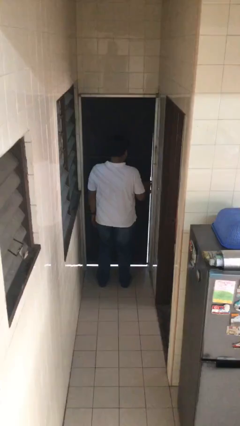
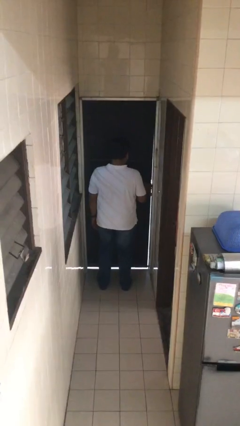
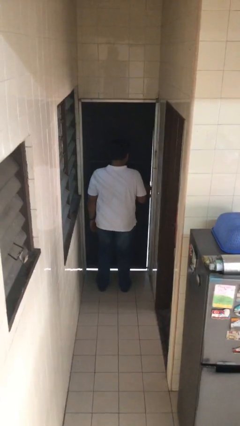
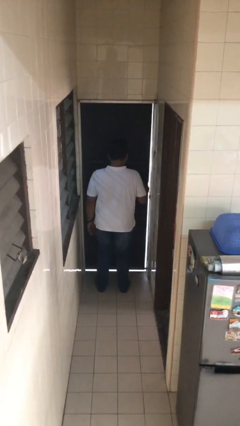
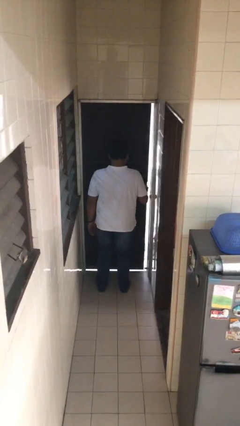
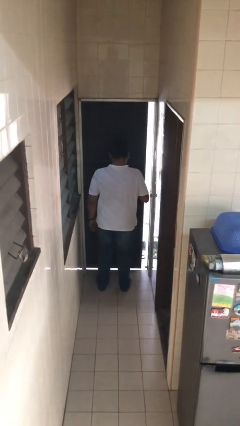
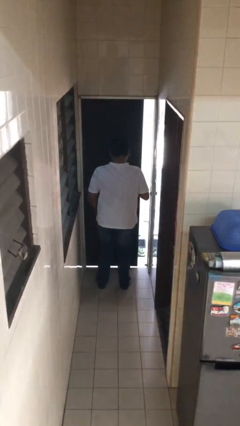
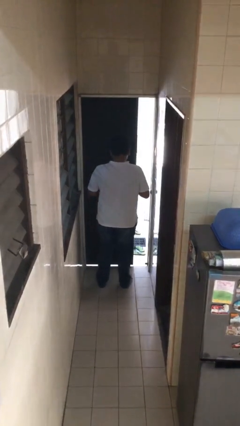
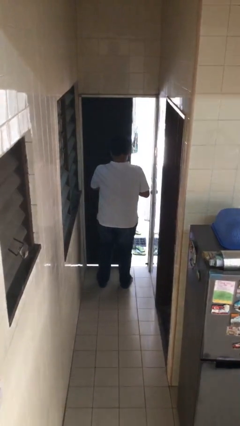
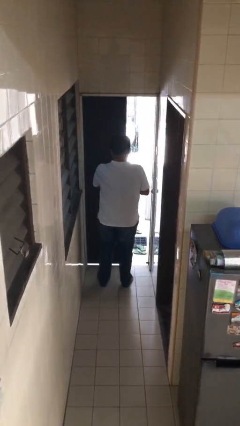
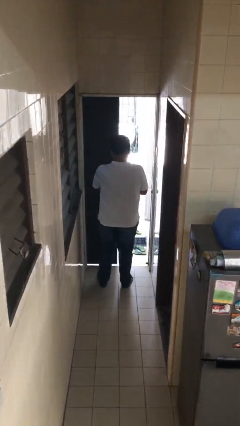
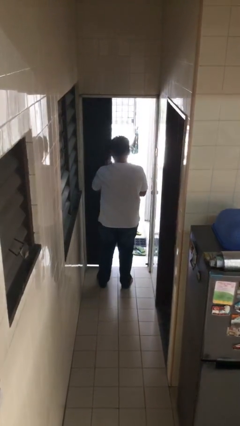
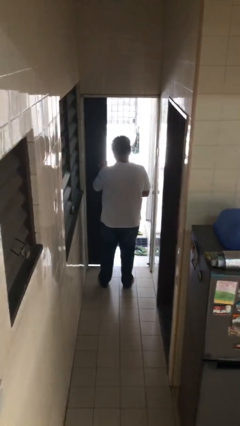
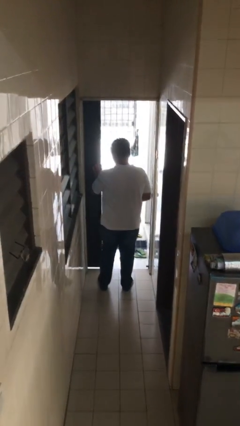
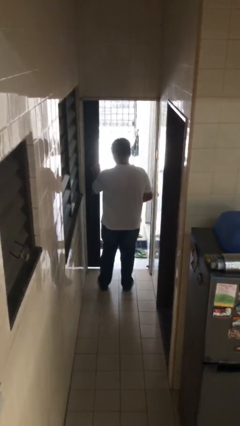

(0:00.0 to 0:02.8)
person opens facility door

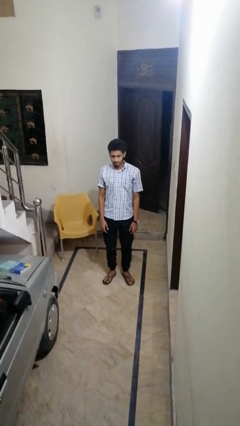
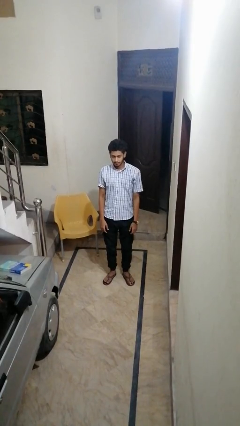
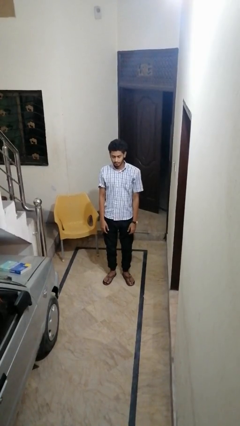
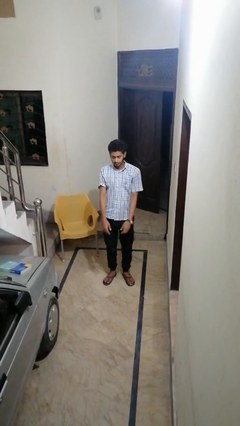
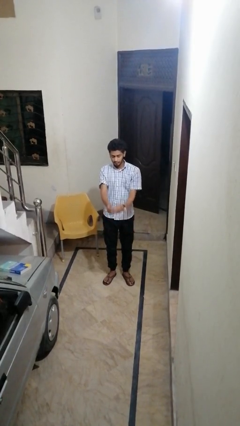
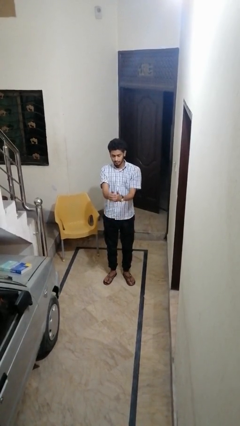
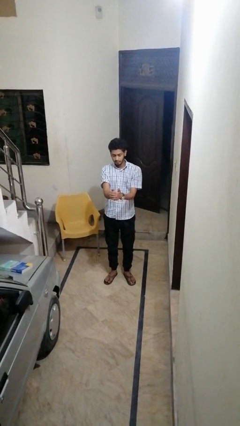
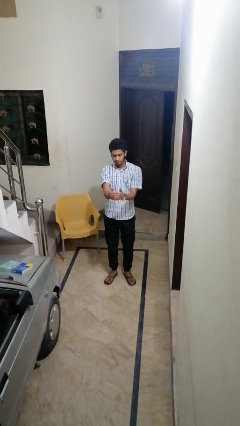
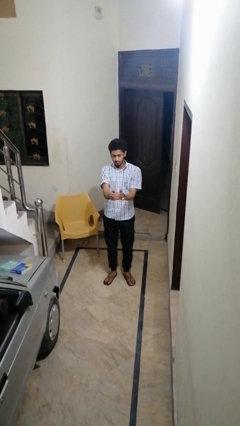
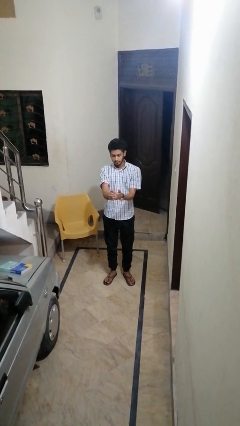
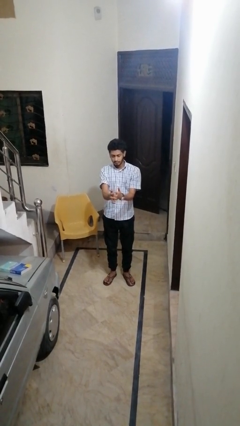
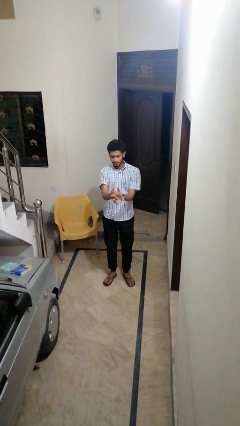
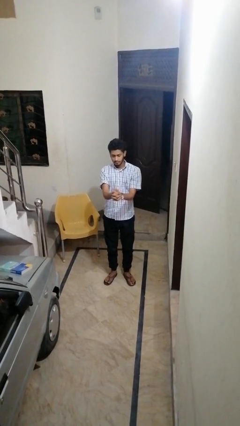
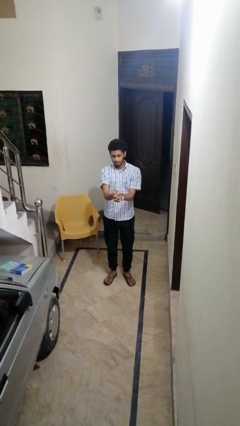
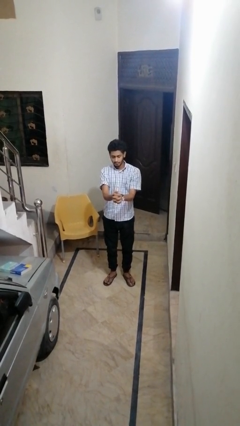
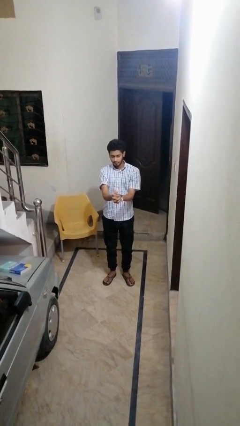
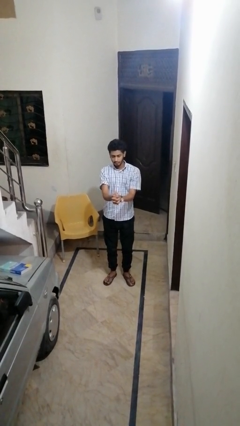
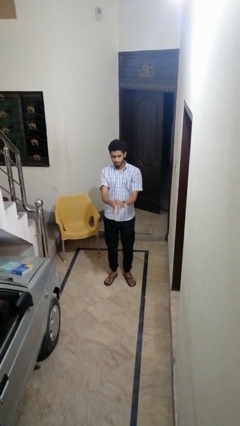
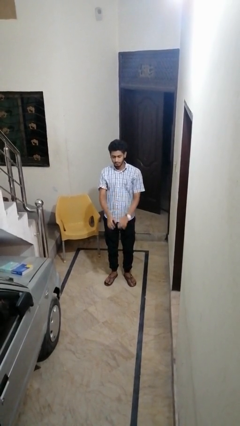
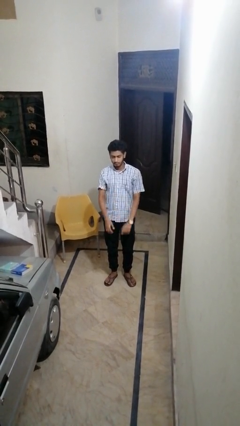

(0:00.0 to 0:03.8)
person cracks knuckles

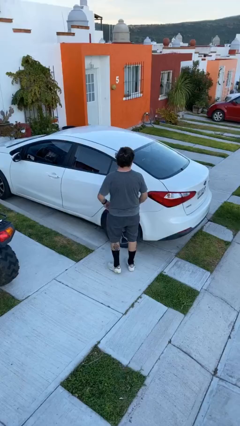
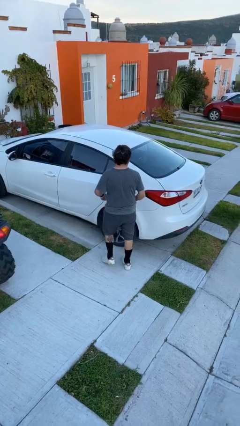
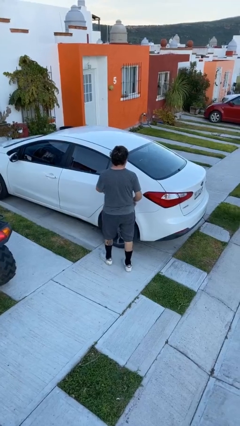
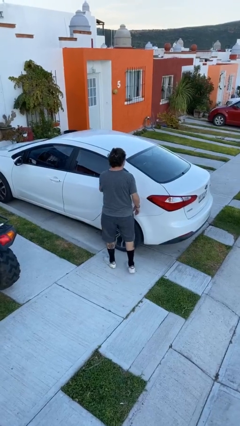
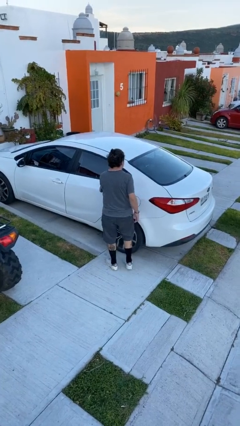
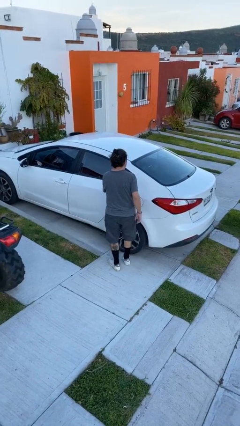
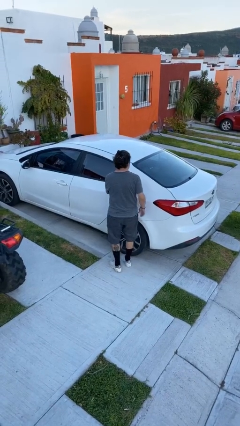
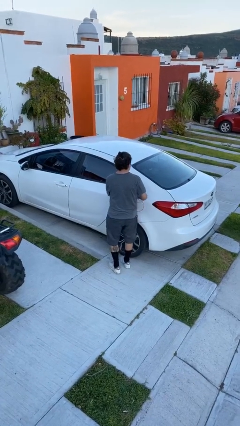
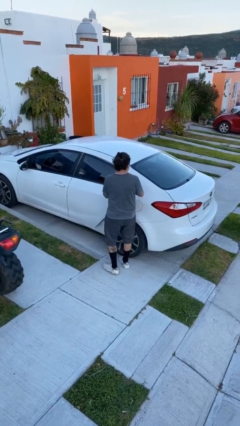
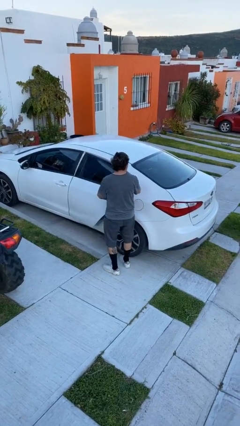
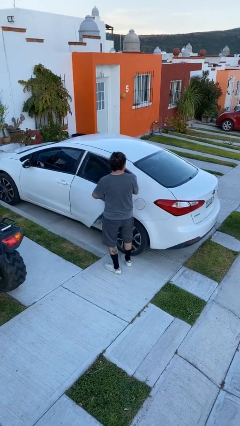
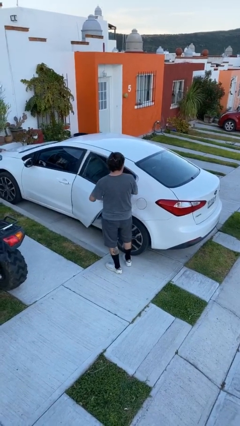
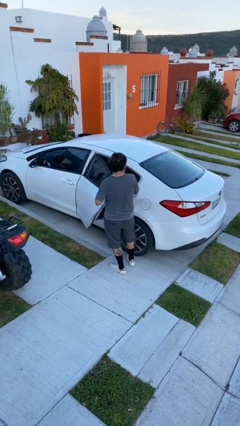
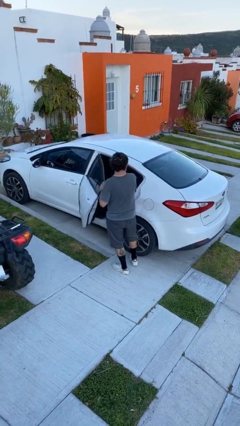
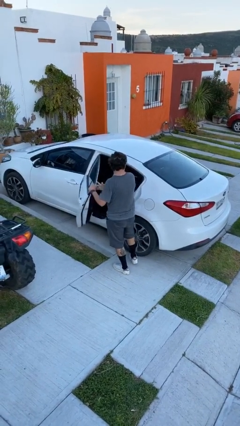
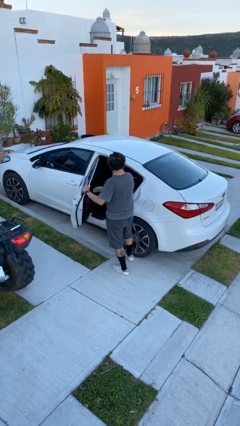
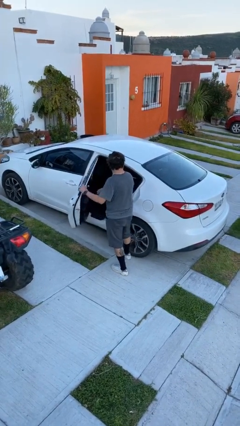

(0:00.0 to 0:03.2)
person opens car door

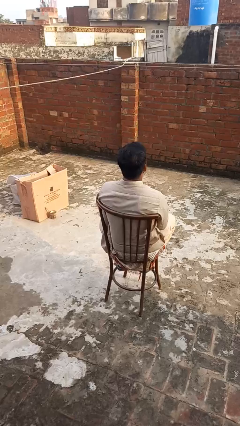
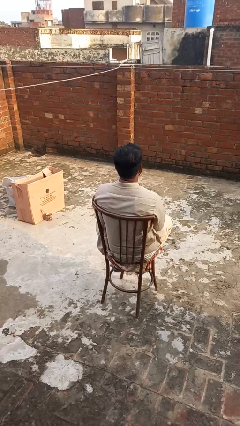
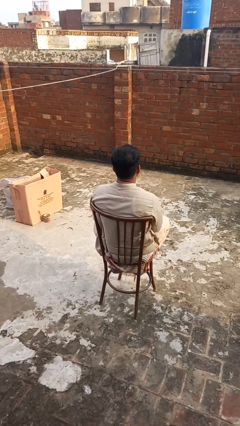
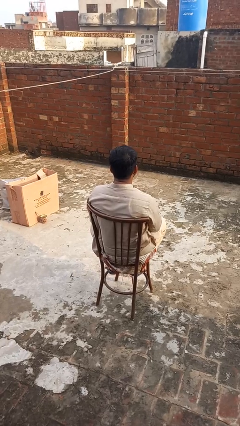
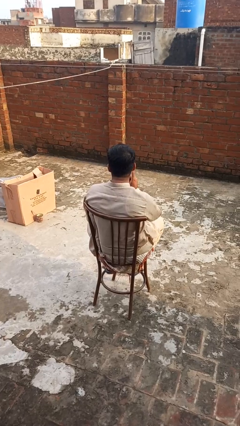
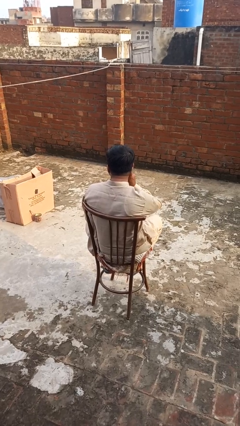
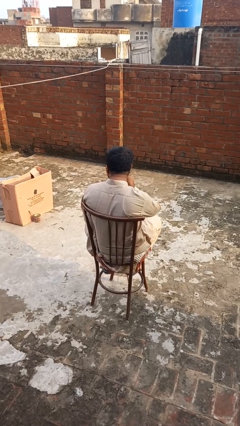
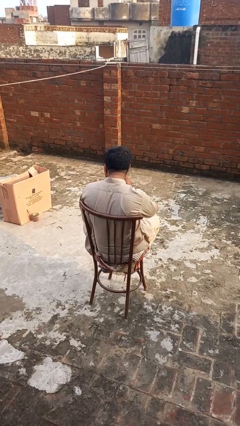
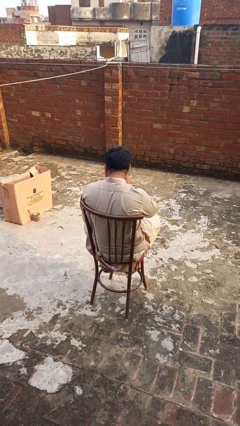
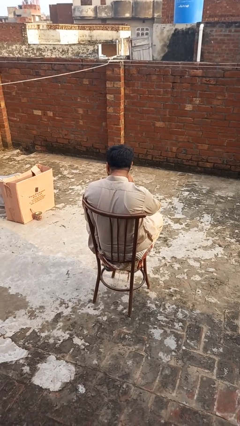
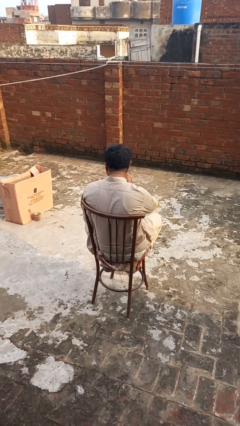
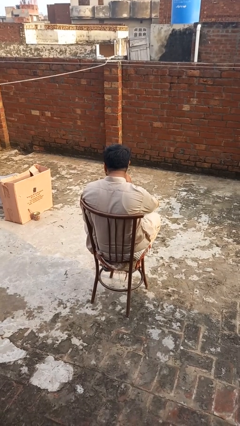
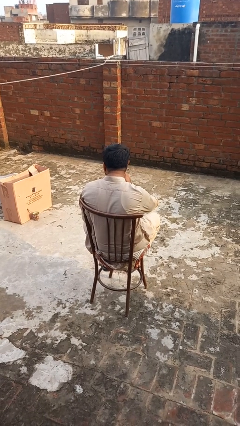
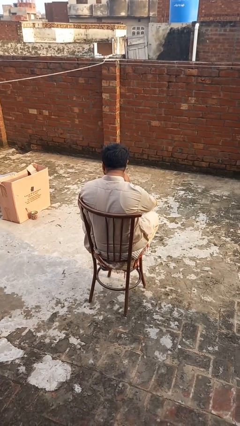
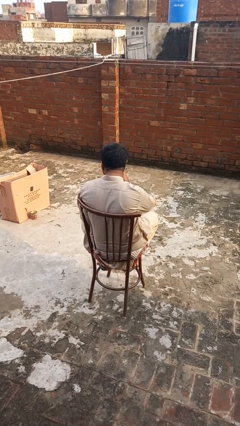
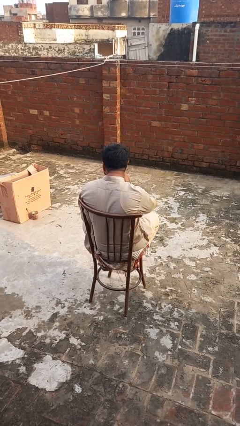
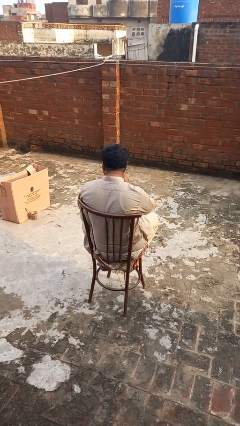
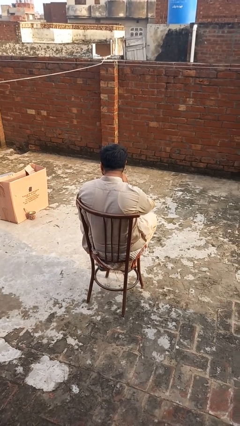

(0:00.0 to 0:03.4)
person gestures listen closely

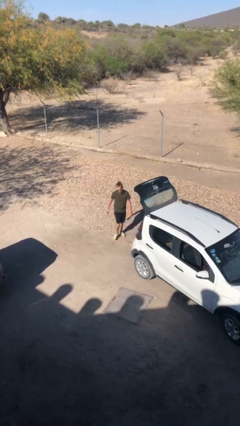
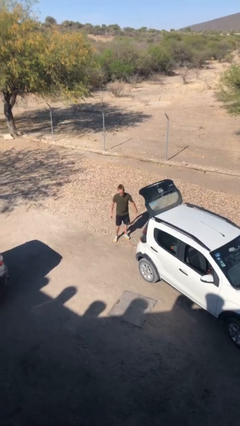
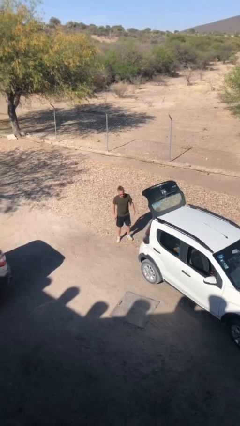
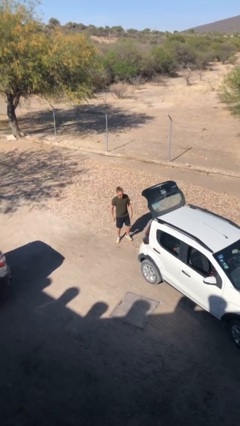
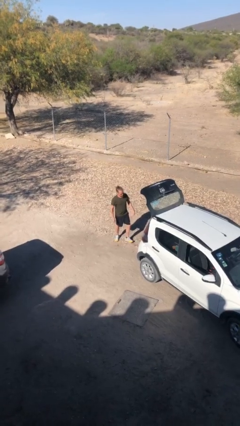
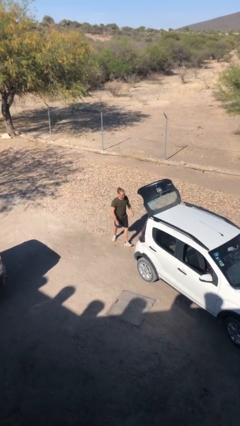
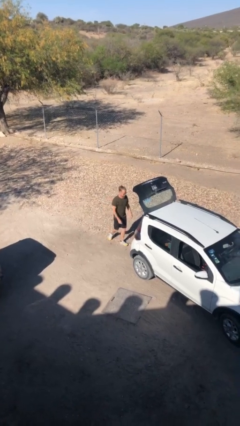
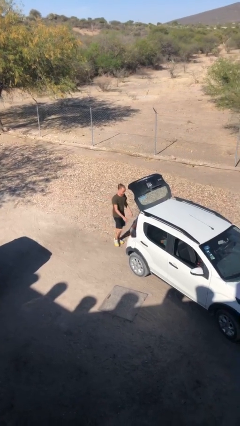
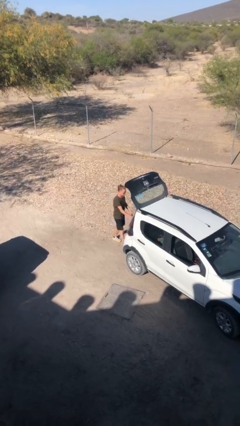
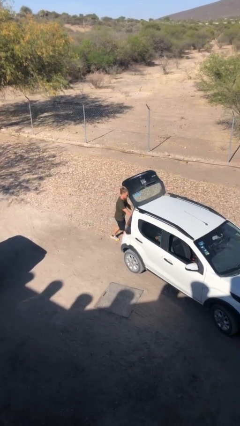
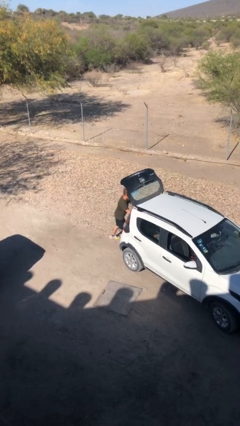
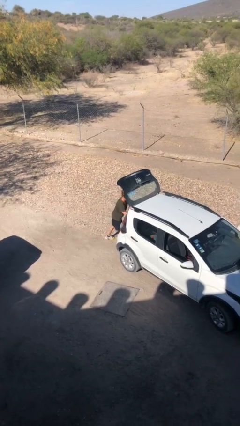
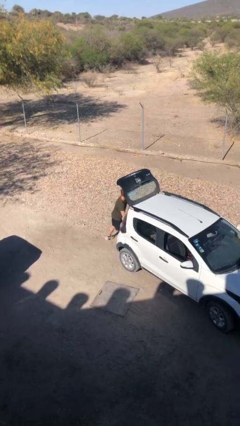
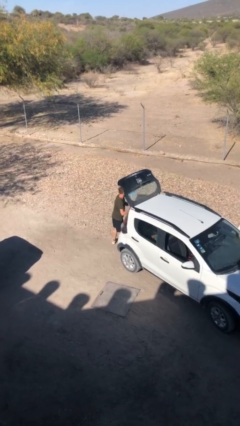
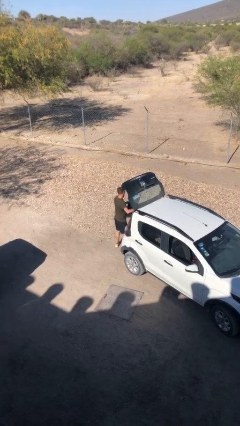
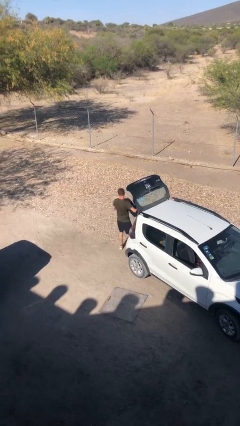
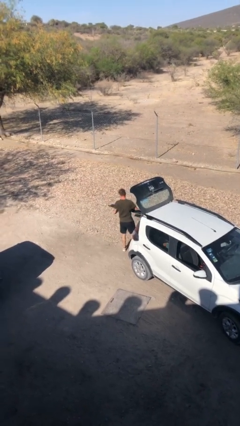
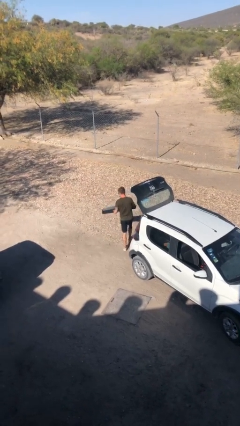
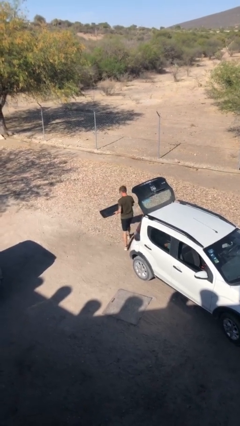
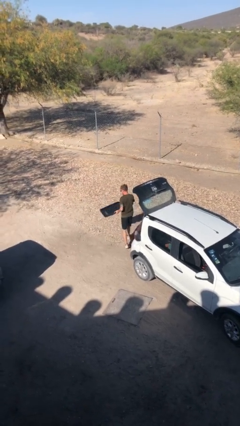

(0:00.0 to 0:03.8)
person unloads car

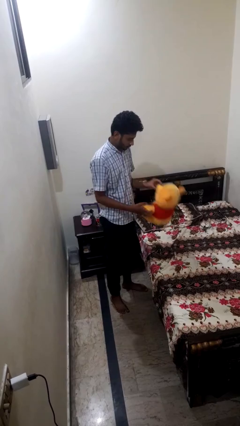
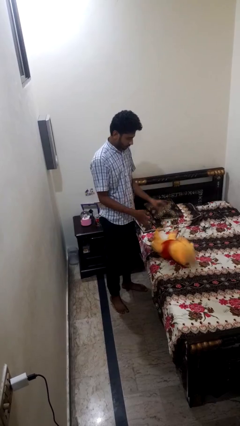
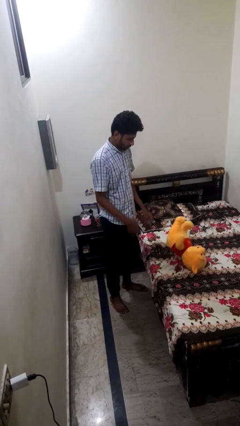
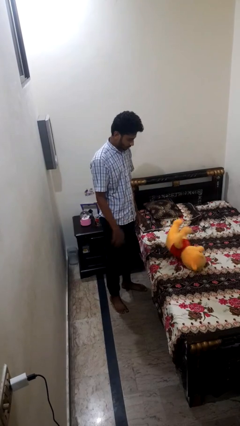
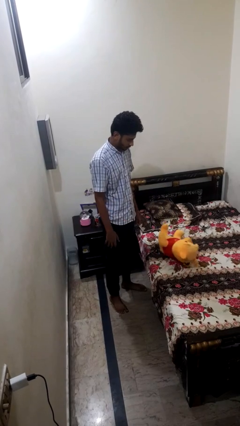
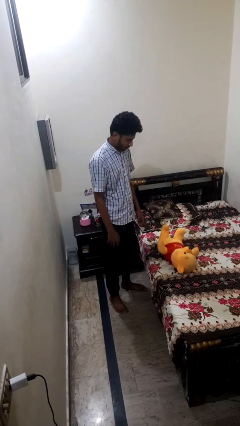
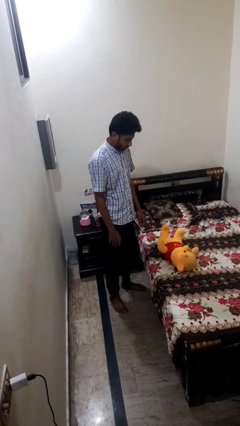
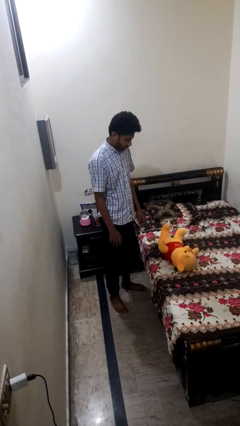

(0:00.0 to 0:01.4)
person puts down object on bed
